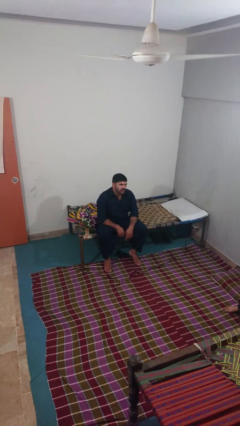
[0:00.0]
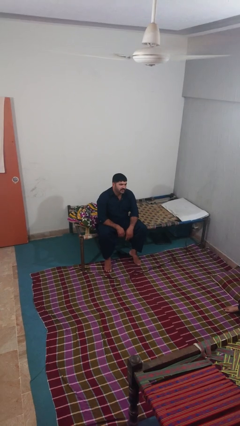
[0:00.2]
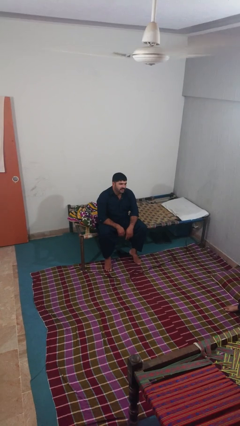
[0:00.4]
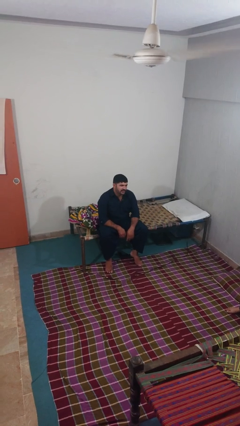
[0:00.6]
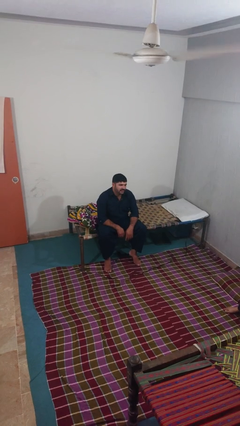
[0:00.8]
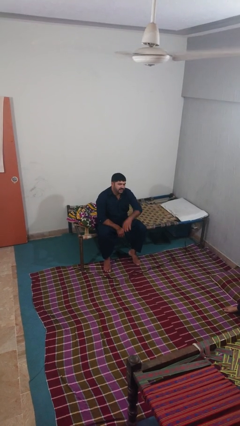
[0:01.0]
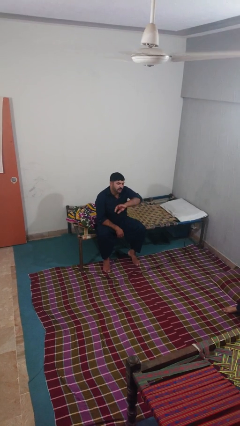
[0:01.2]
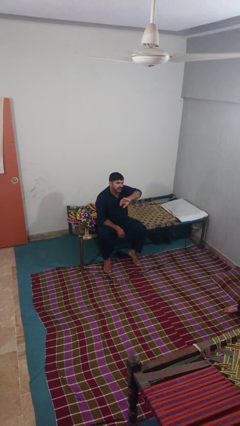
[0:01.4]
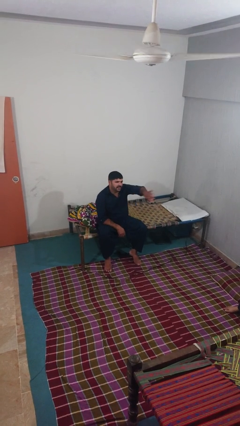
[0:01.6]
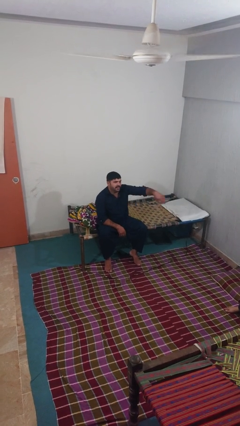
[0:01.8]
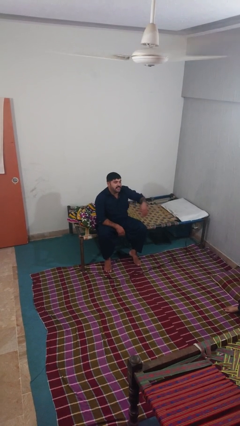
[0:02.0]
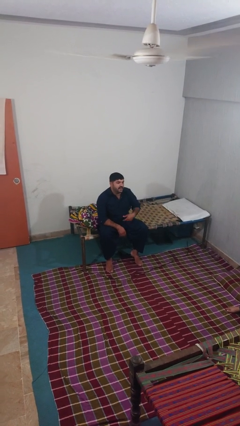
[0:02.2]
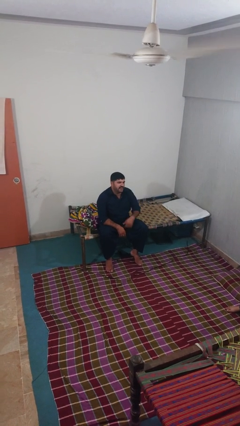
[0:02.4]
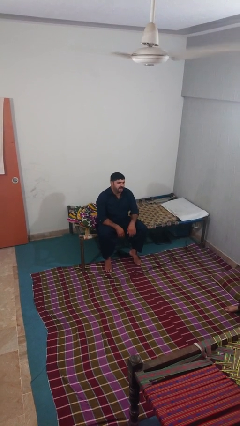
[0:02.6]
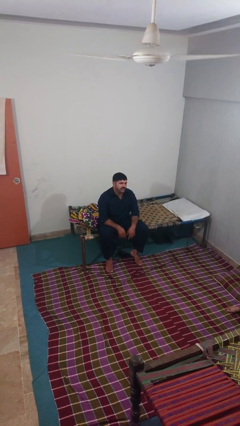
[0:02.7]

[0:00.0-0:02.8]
person gestures swipe left

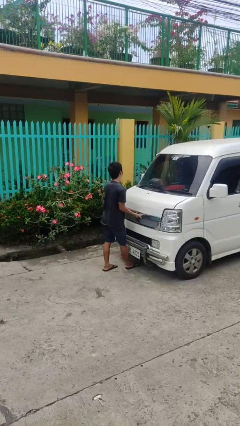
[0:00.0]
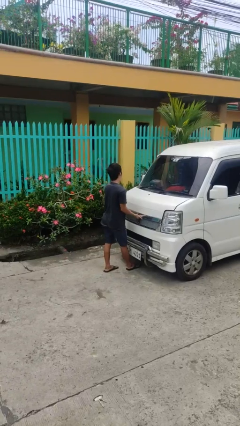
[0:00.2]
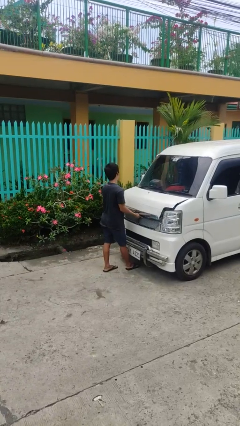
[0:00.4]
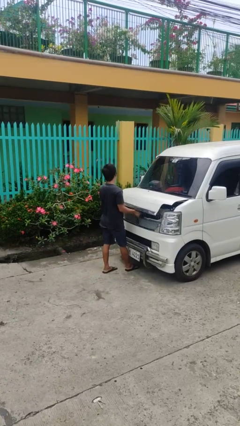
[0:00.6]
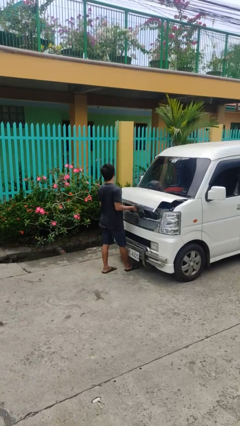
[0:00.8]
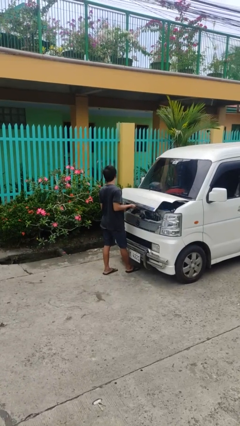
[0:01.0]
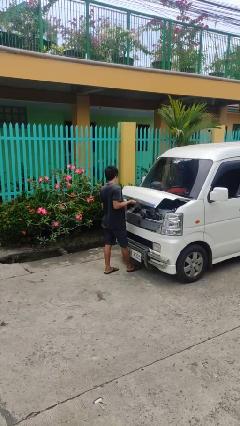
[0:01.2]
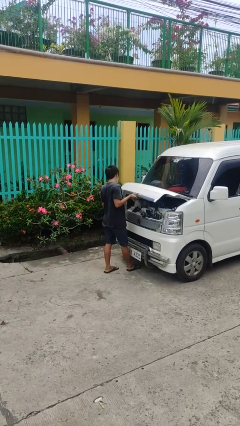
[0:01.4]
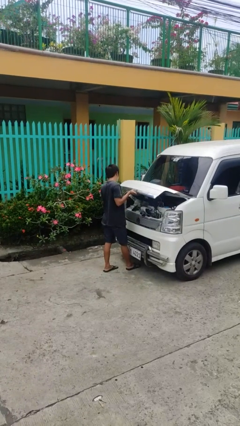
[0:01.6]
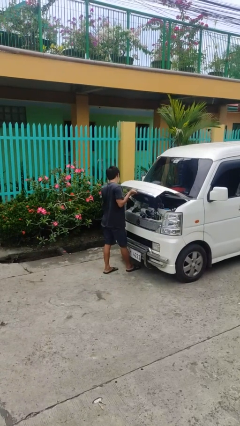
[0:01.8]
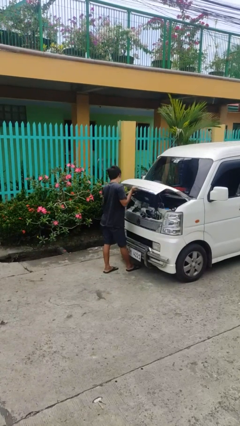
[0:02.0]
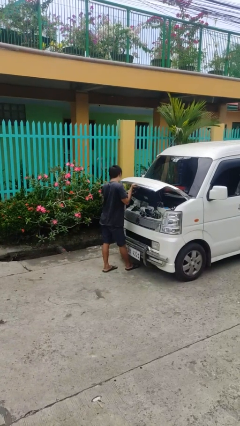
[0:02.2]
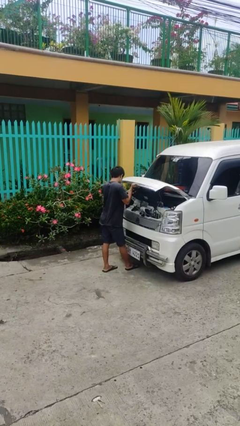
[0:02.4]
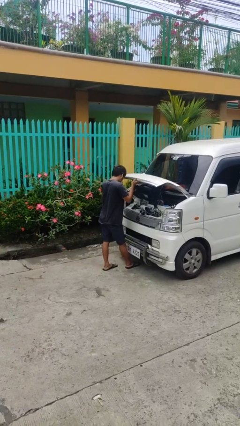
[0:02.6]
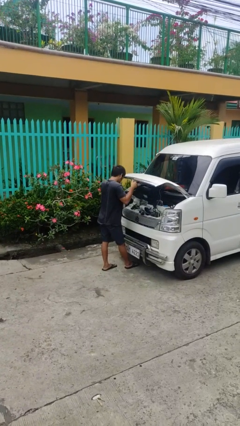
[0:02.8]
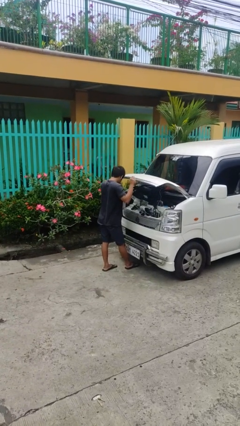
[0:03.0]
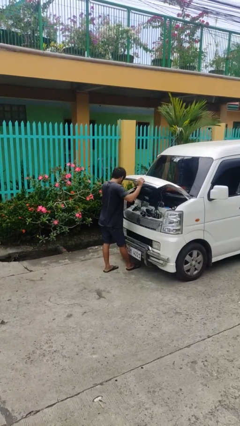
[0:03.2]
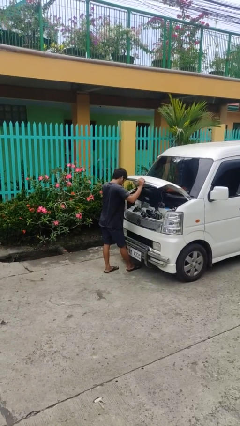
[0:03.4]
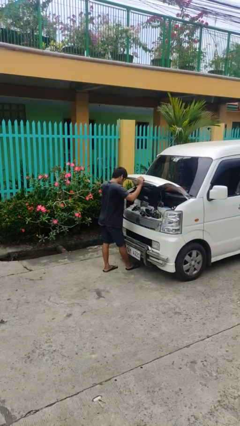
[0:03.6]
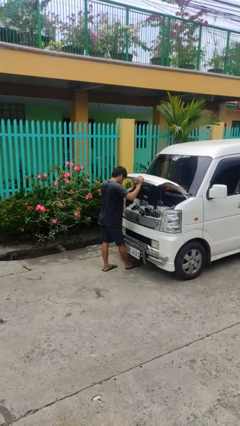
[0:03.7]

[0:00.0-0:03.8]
person opens car hood

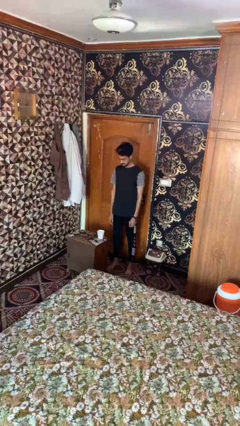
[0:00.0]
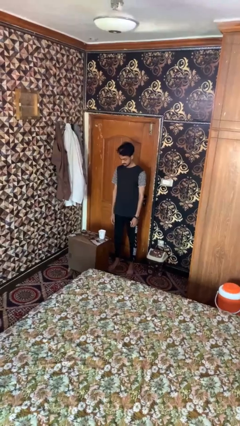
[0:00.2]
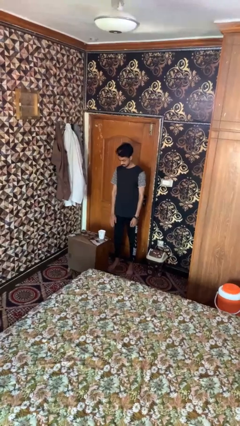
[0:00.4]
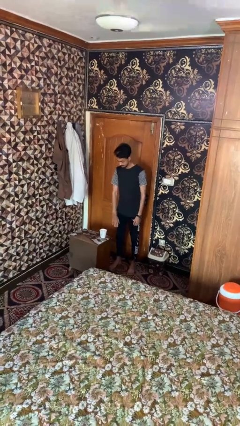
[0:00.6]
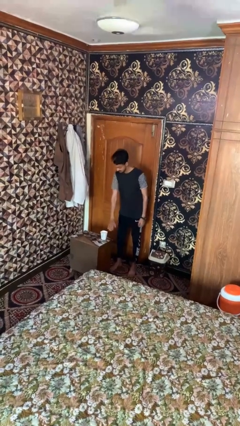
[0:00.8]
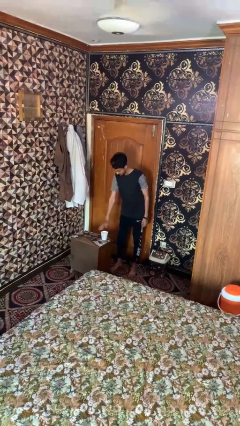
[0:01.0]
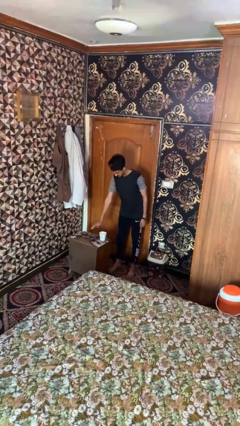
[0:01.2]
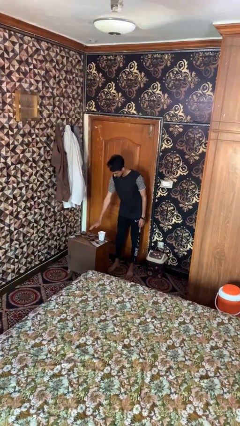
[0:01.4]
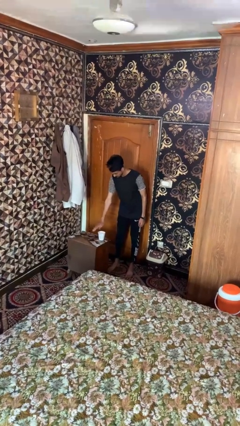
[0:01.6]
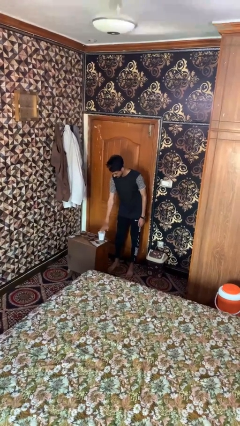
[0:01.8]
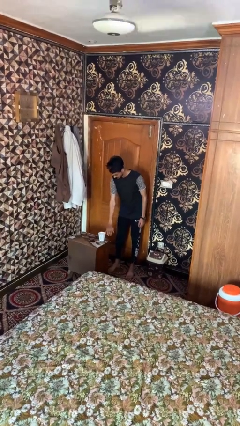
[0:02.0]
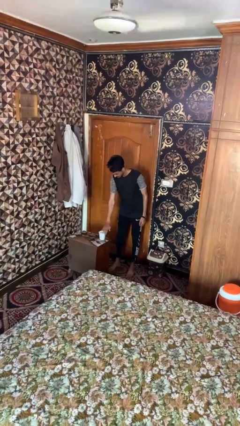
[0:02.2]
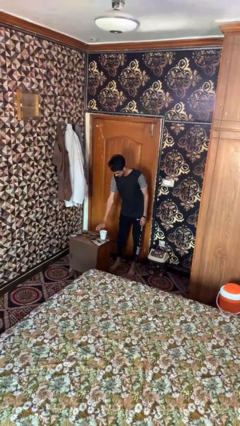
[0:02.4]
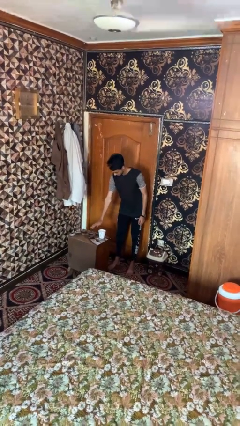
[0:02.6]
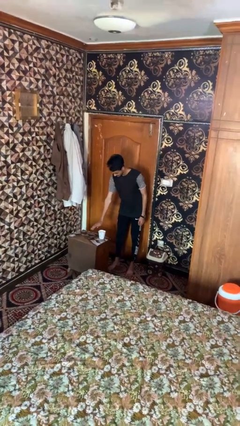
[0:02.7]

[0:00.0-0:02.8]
person waves hand over object

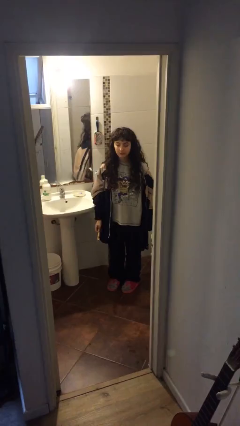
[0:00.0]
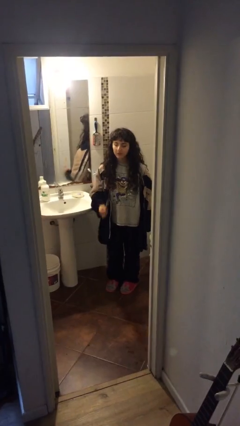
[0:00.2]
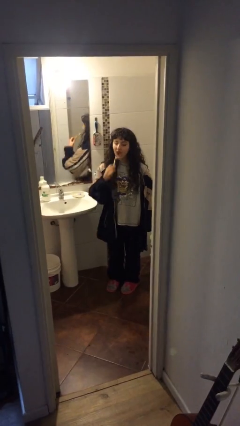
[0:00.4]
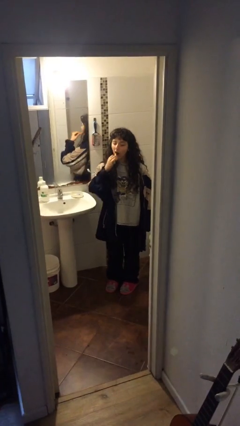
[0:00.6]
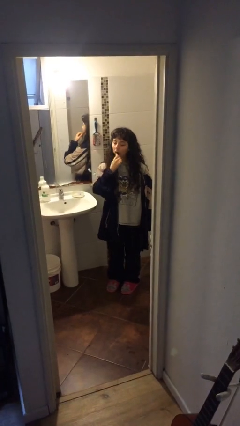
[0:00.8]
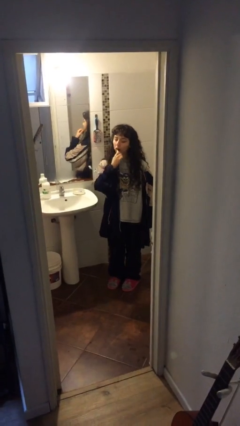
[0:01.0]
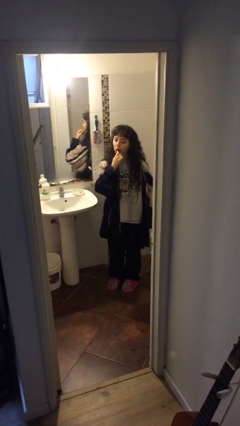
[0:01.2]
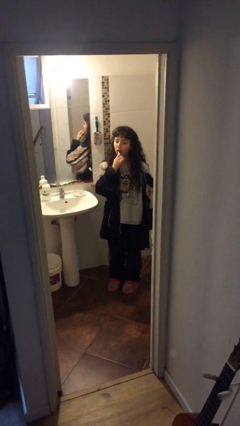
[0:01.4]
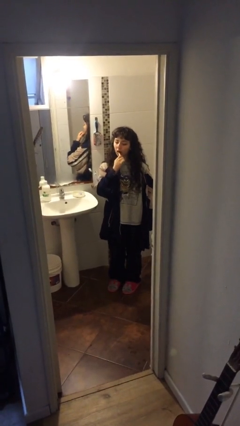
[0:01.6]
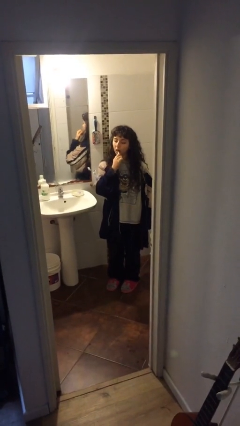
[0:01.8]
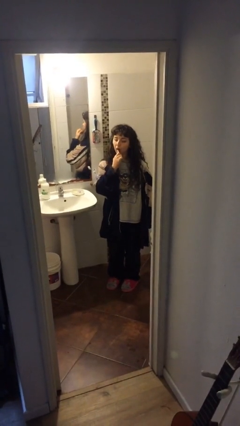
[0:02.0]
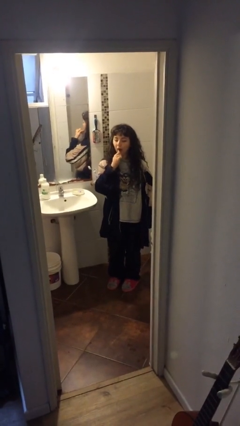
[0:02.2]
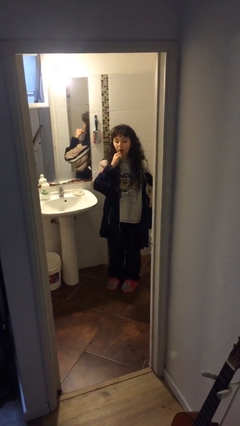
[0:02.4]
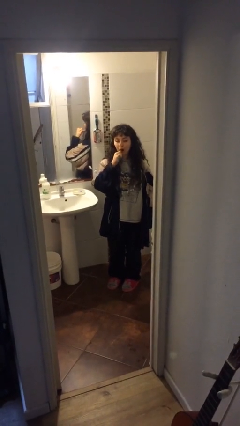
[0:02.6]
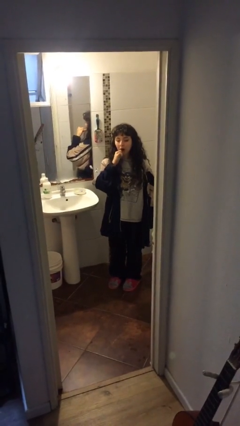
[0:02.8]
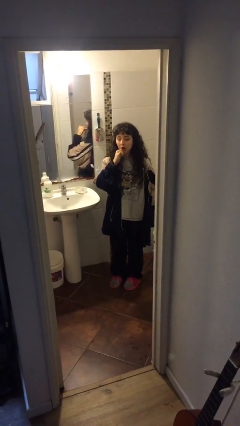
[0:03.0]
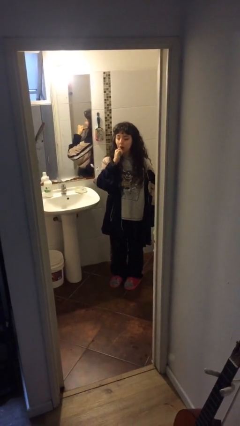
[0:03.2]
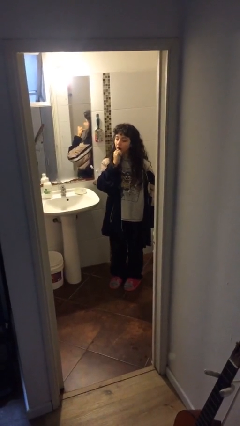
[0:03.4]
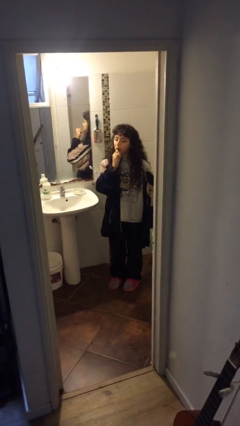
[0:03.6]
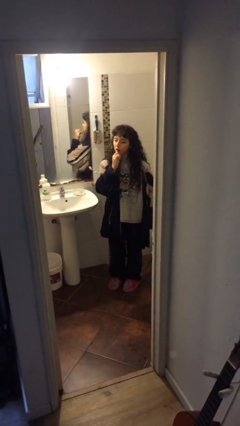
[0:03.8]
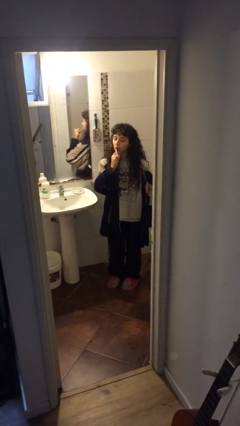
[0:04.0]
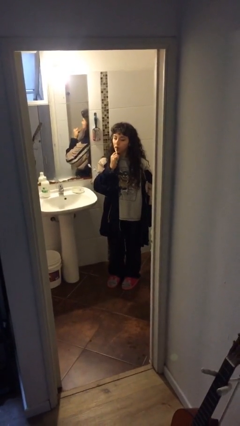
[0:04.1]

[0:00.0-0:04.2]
person brushes teeth

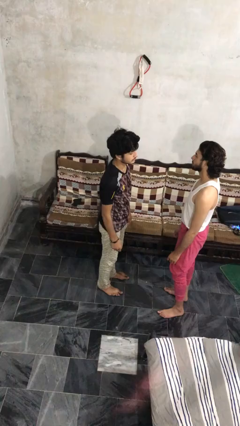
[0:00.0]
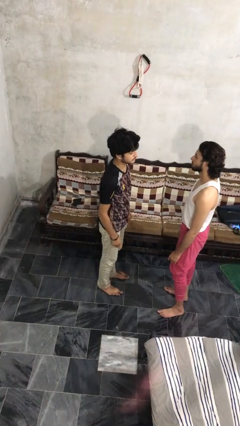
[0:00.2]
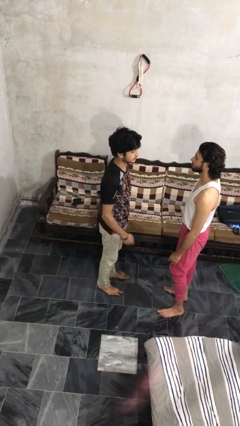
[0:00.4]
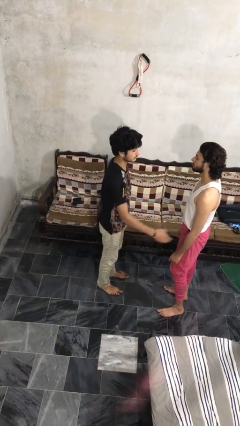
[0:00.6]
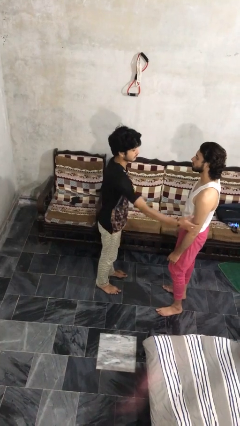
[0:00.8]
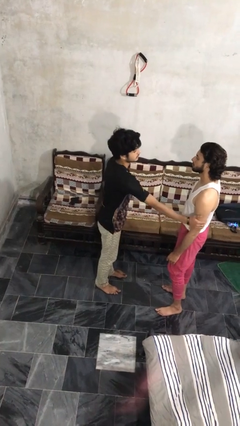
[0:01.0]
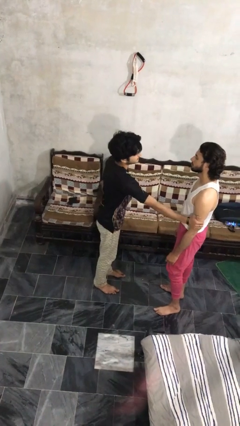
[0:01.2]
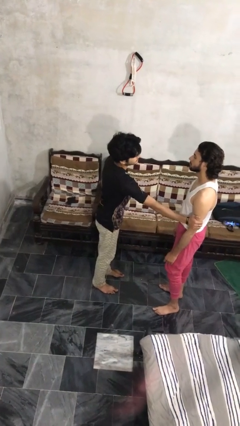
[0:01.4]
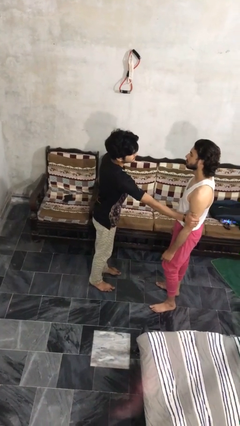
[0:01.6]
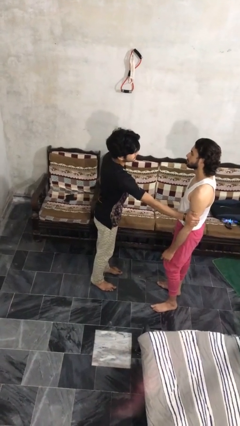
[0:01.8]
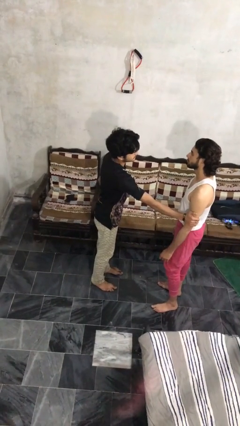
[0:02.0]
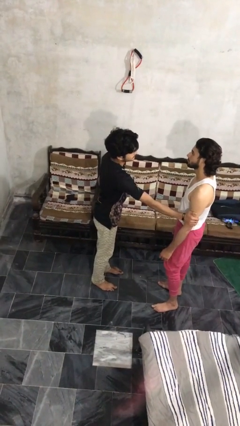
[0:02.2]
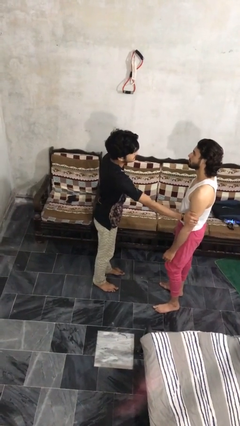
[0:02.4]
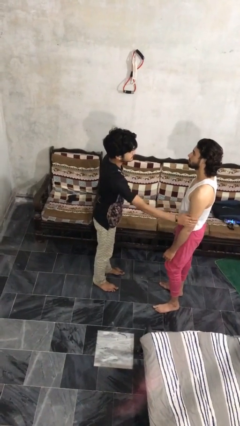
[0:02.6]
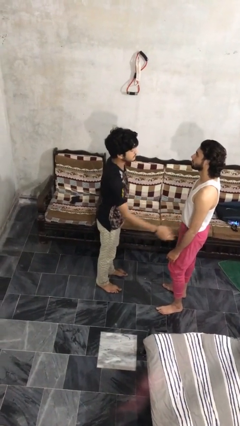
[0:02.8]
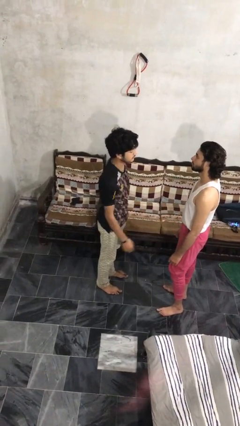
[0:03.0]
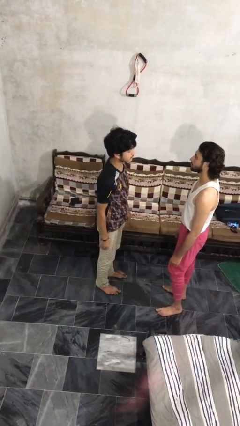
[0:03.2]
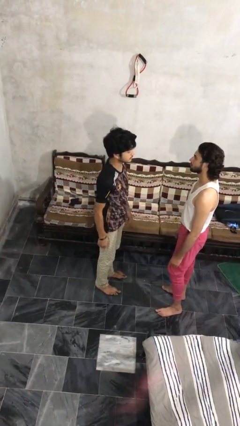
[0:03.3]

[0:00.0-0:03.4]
person grabs person by bicep

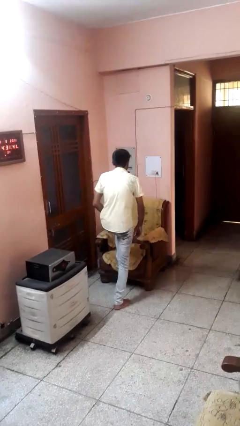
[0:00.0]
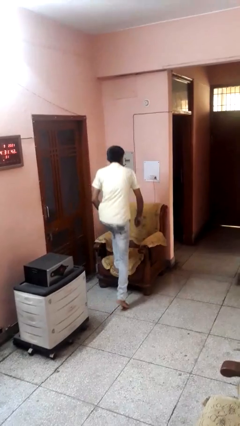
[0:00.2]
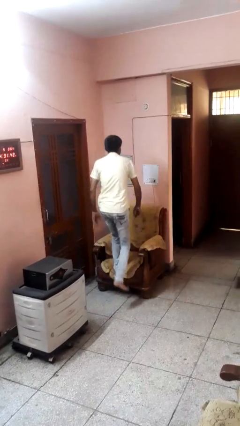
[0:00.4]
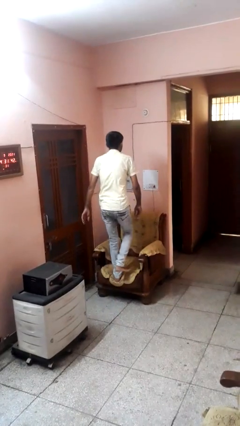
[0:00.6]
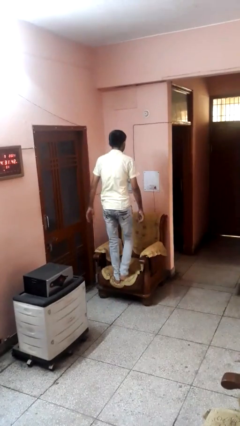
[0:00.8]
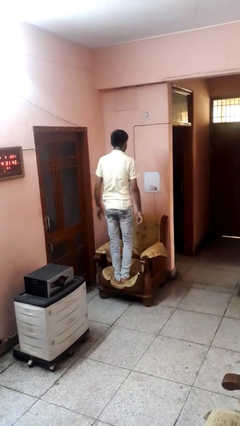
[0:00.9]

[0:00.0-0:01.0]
person climbs on couch
